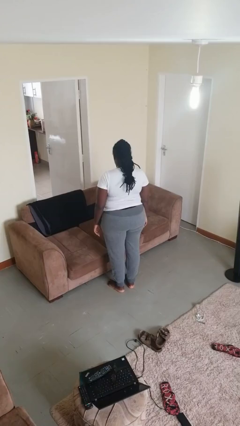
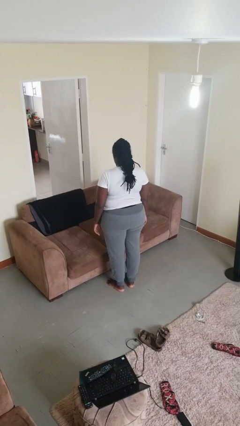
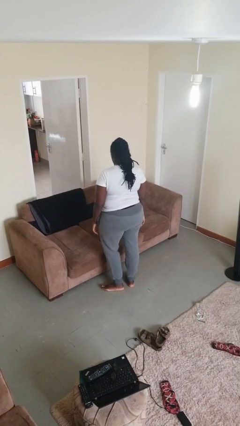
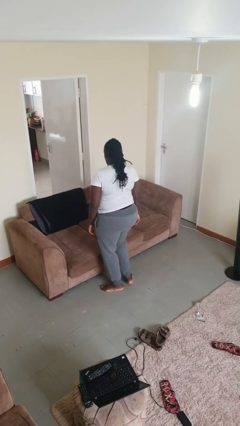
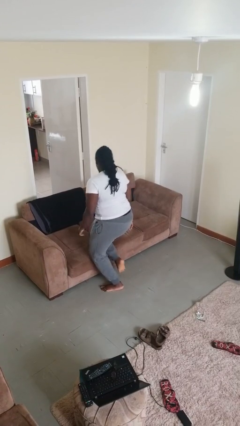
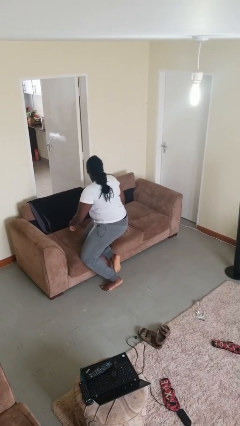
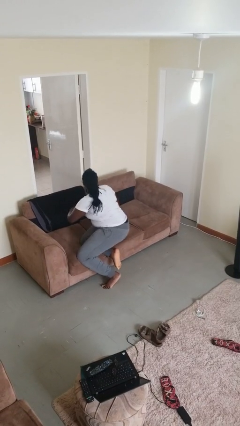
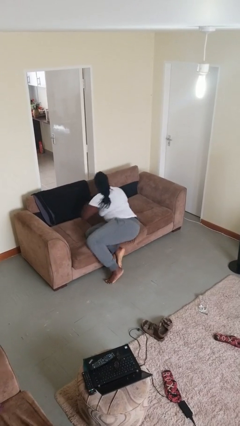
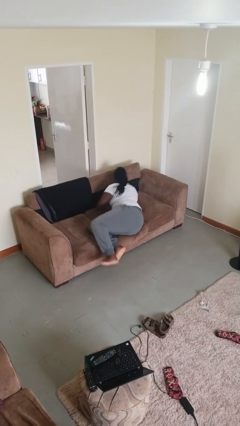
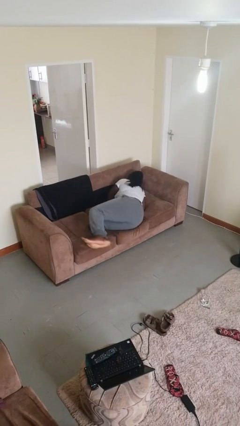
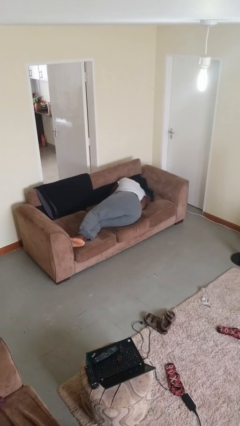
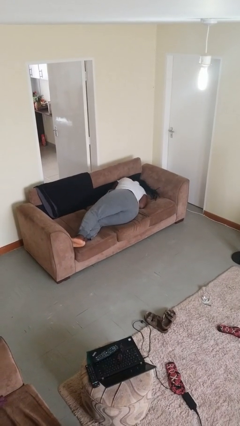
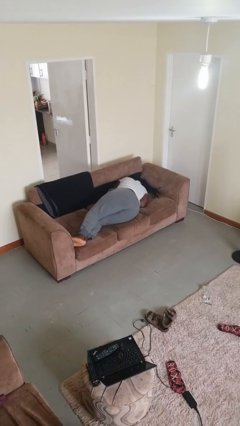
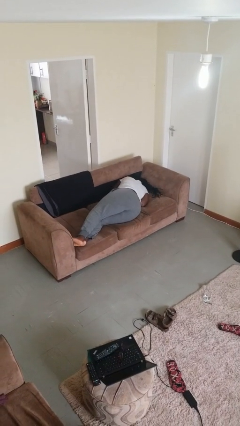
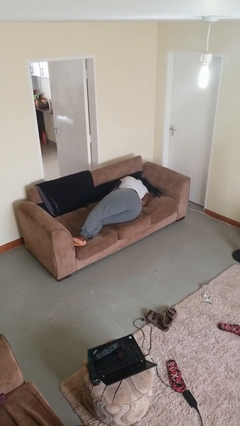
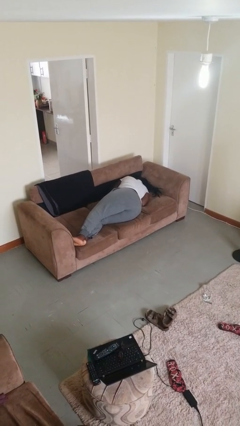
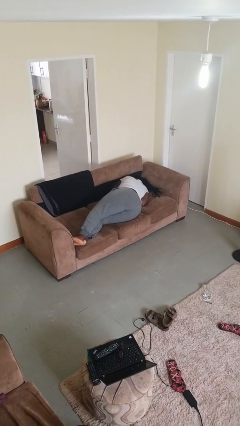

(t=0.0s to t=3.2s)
person lies down on bed

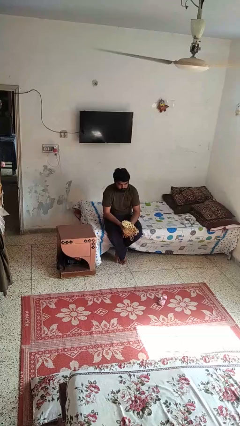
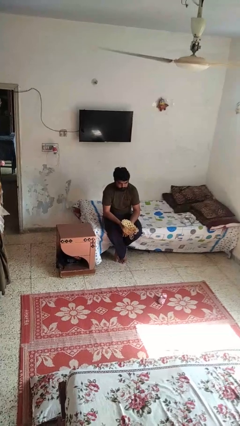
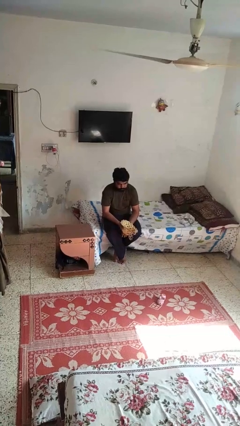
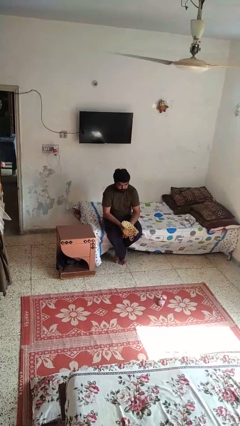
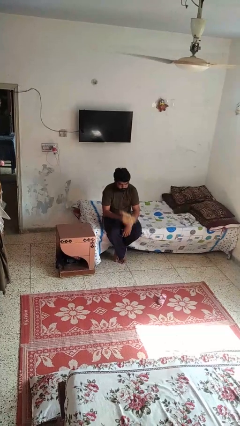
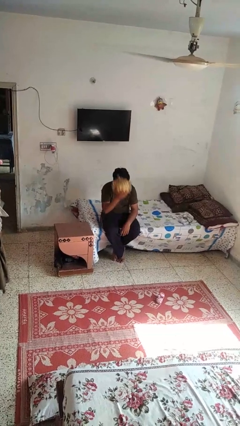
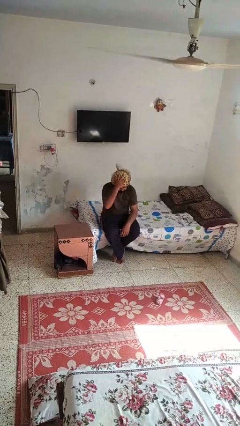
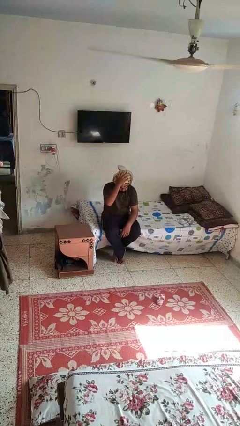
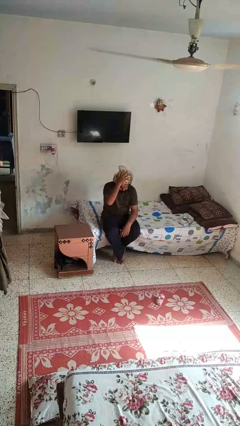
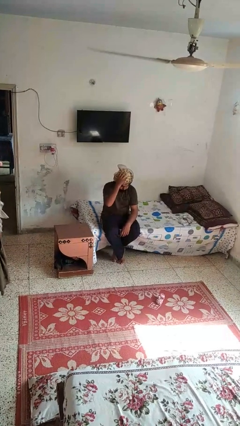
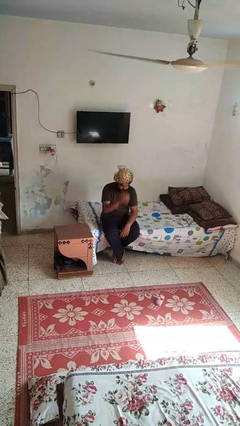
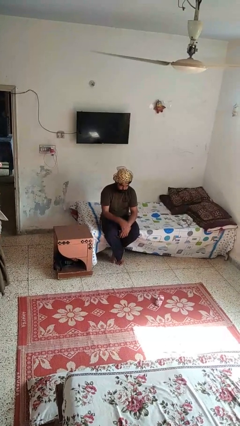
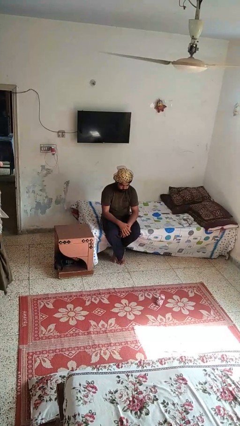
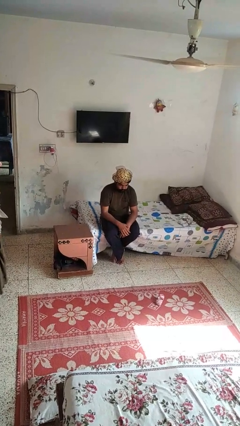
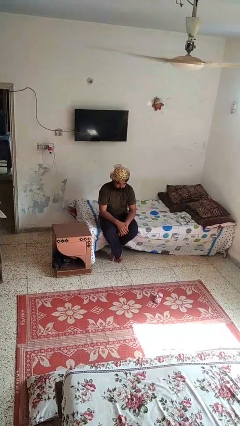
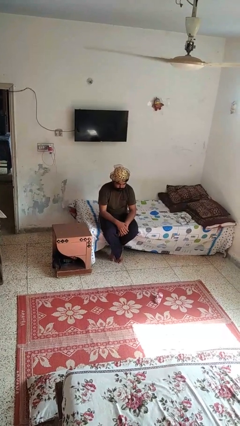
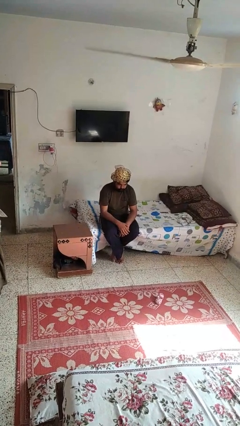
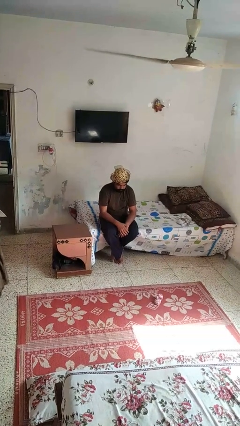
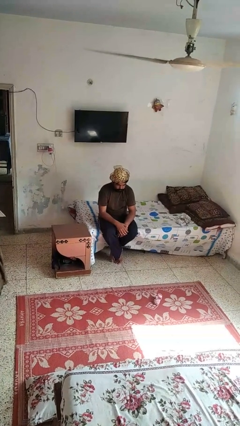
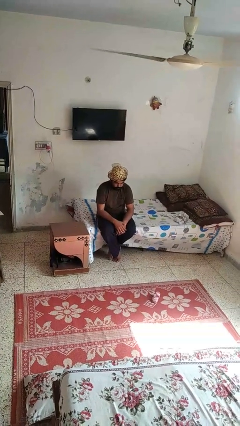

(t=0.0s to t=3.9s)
person puts on hat

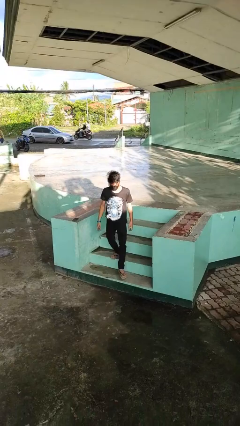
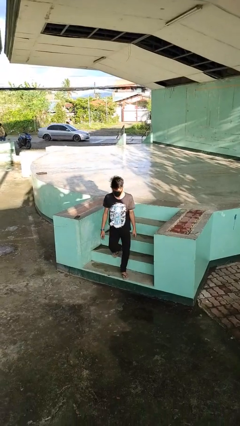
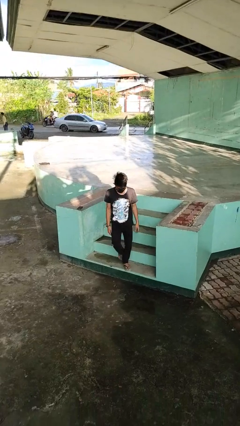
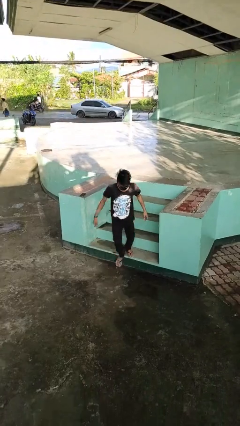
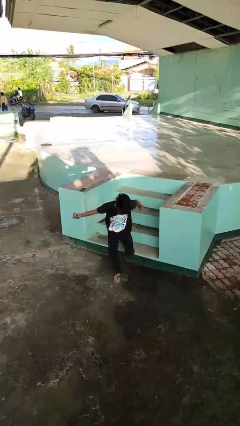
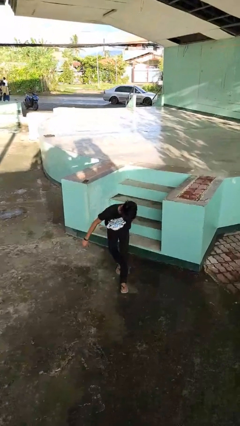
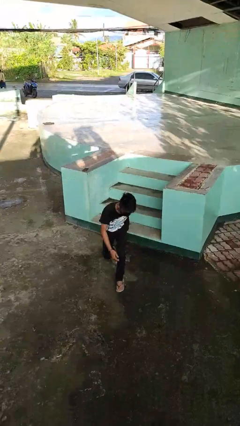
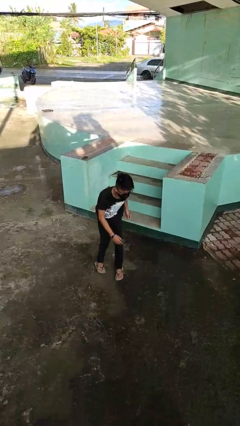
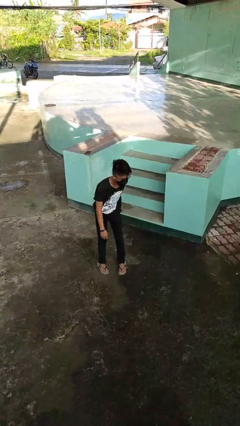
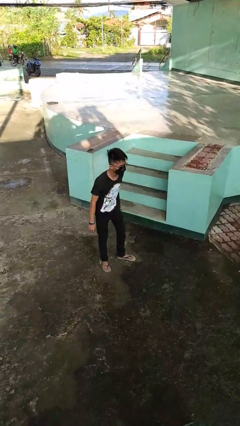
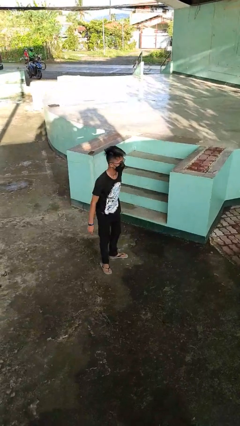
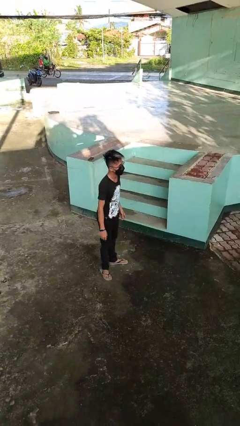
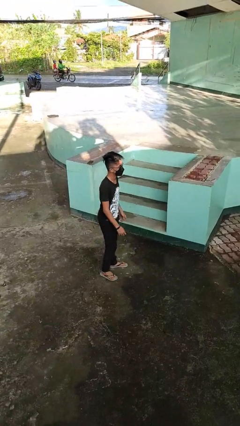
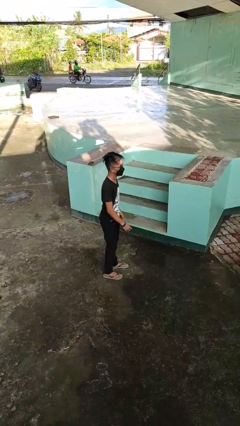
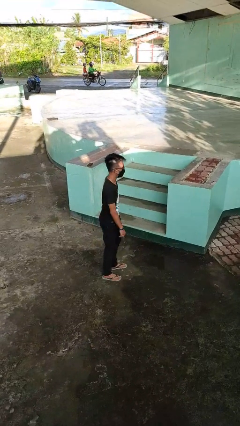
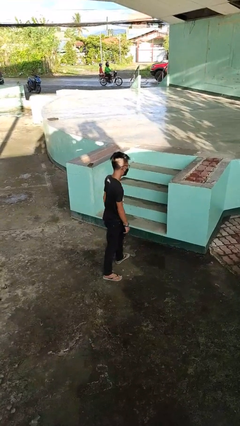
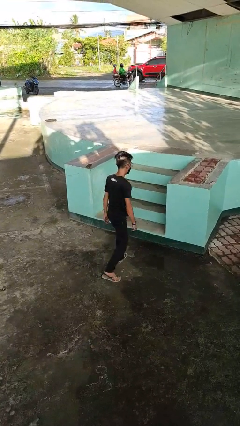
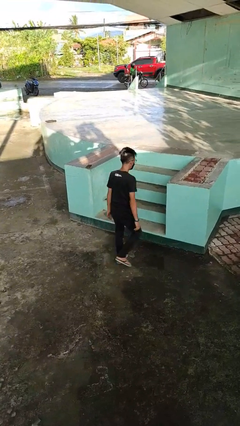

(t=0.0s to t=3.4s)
person trips on stair

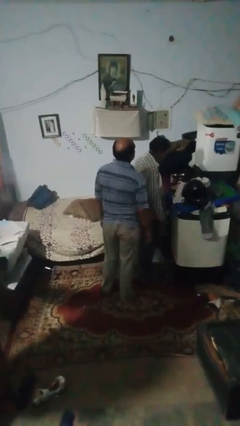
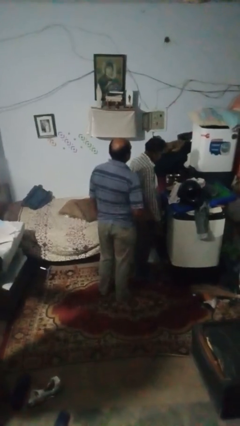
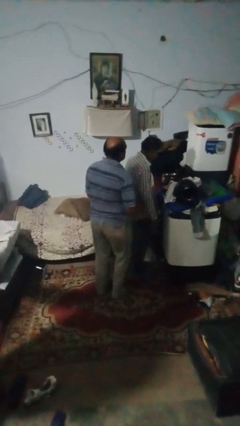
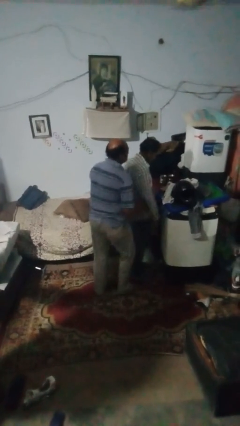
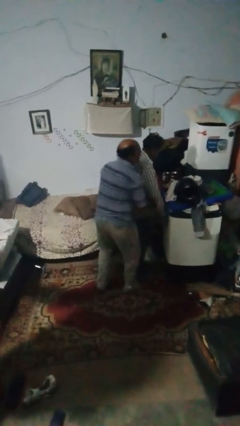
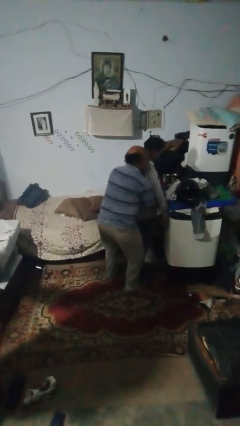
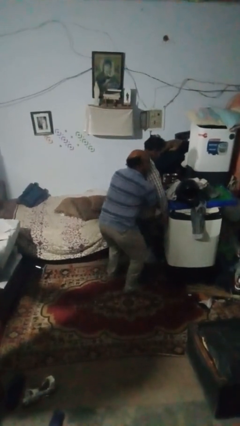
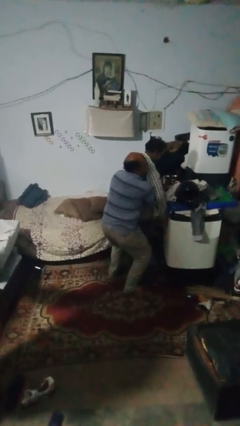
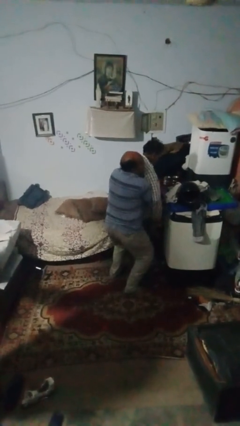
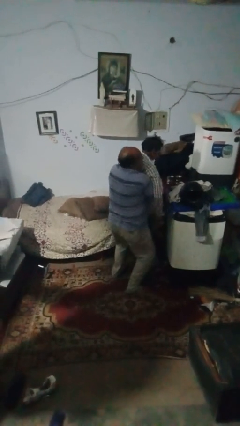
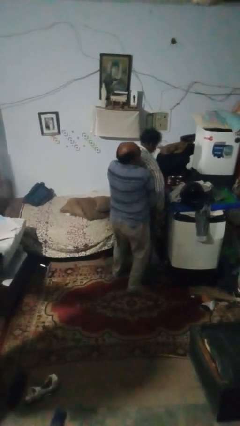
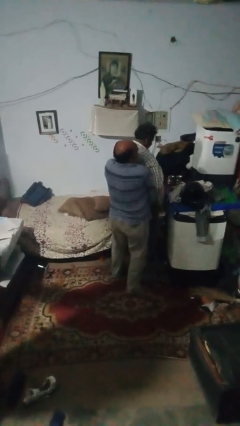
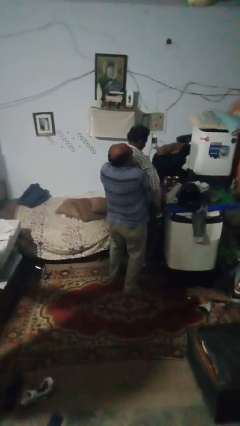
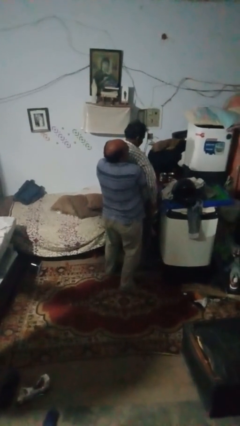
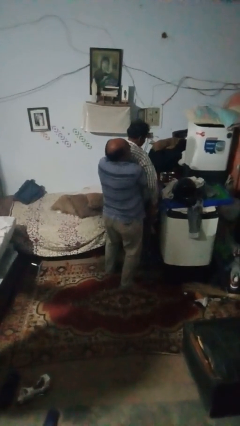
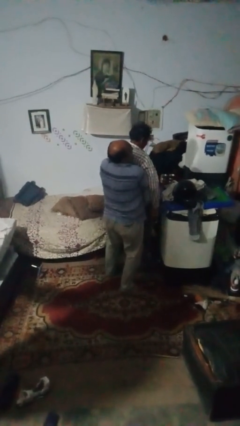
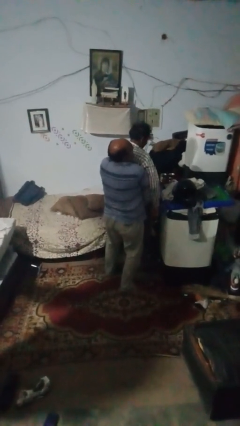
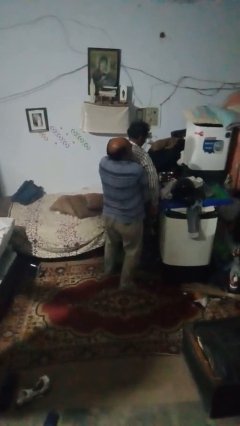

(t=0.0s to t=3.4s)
person carries person on back

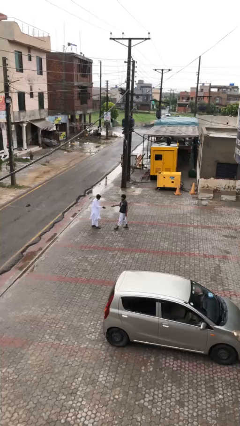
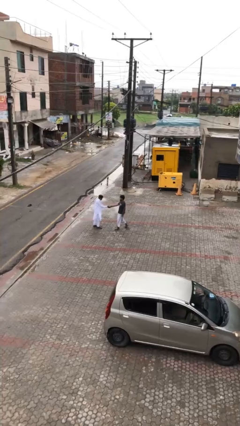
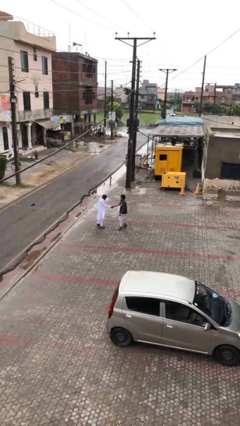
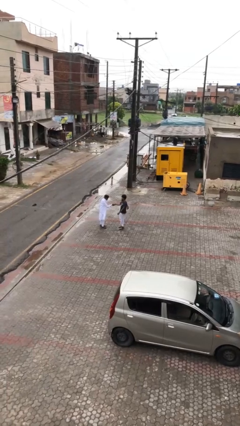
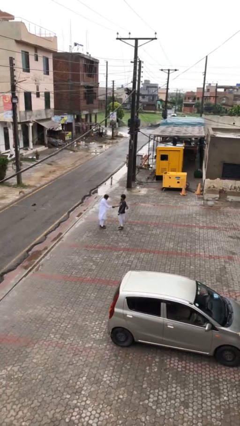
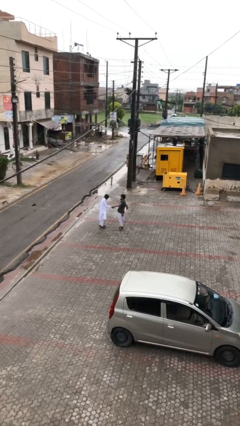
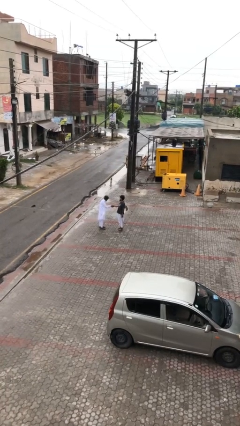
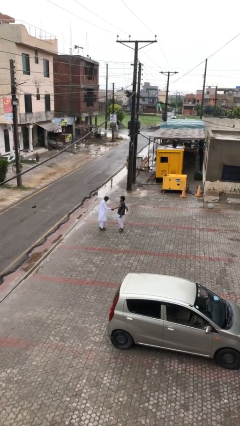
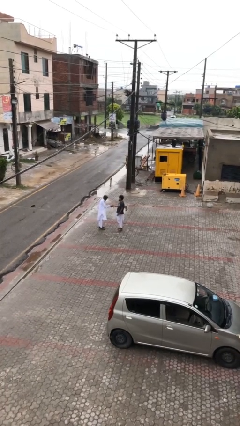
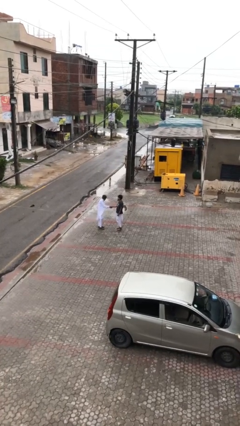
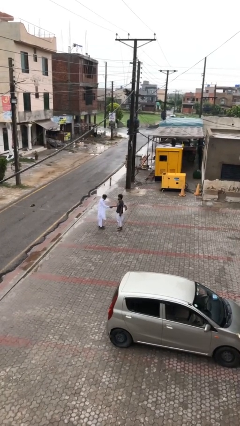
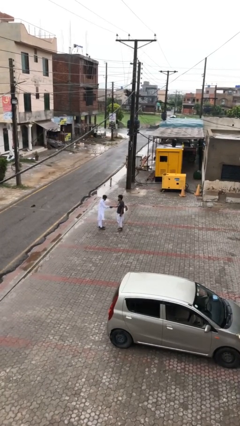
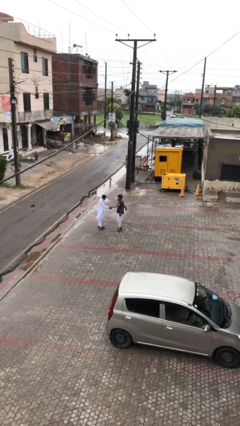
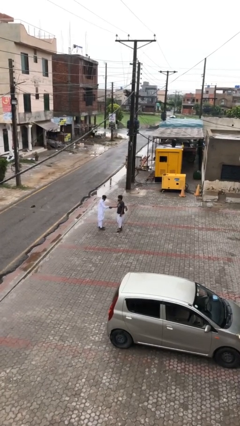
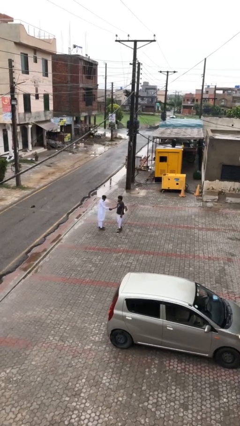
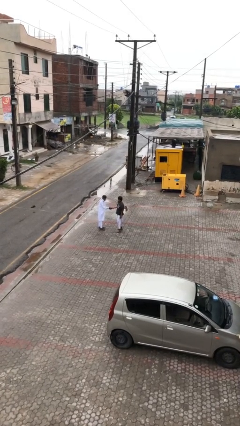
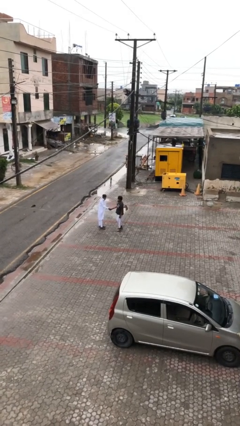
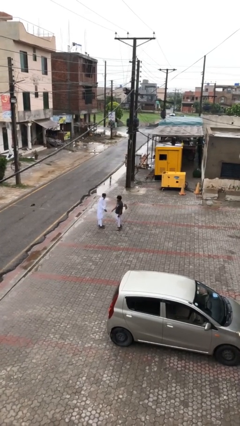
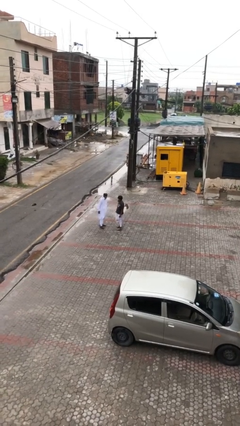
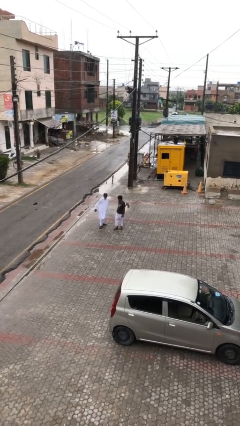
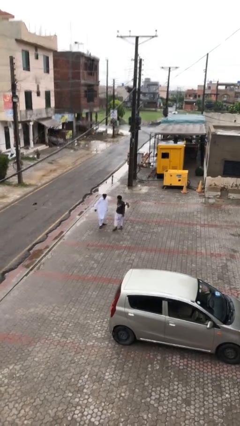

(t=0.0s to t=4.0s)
person shakes hand

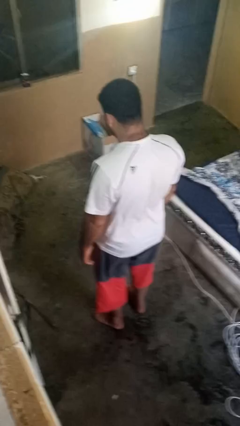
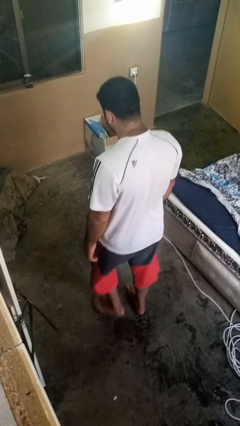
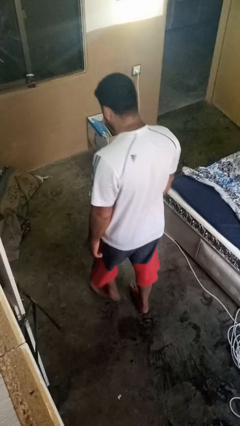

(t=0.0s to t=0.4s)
person trips on object on floor
